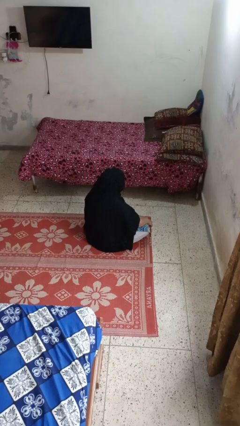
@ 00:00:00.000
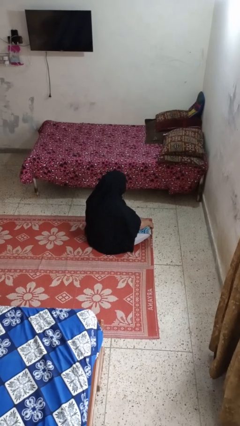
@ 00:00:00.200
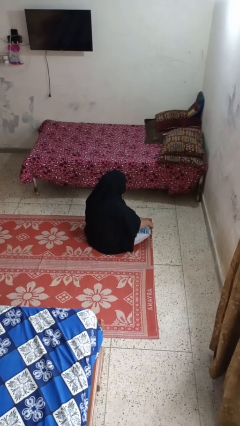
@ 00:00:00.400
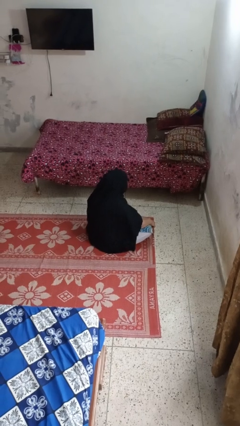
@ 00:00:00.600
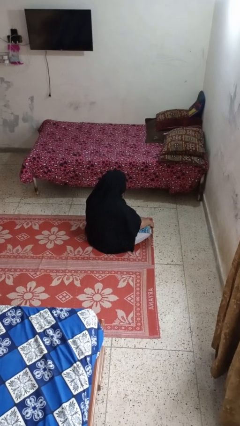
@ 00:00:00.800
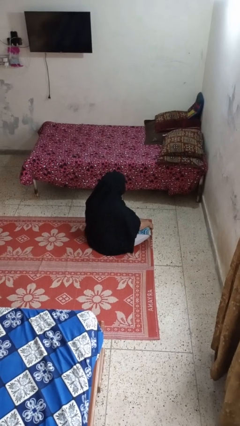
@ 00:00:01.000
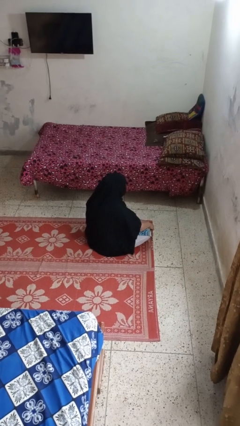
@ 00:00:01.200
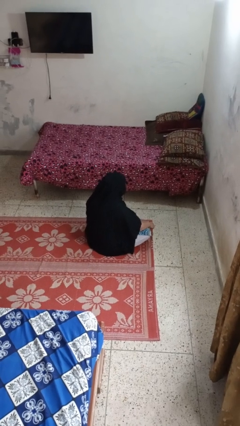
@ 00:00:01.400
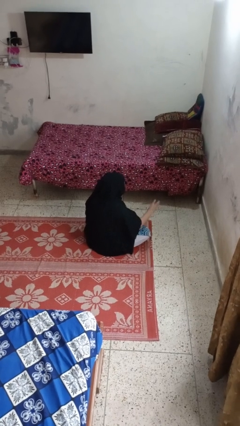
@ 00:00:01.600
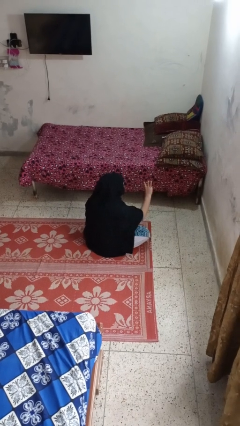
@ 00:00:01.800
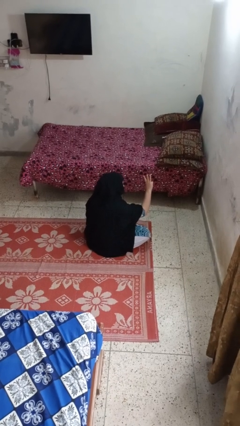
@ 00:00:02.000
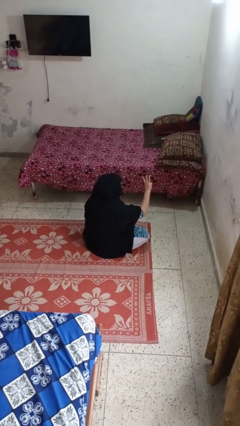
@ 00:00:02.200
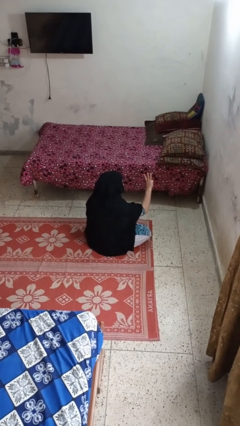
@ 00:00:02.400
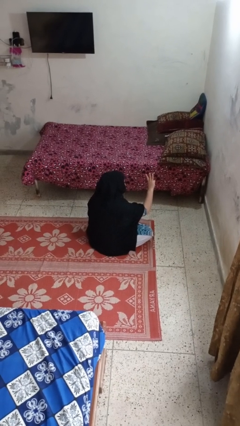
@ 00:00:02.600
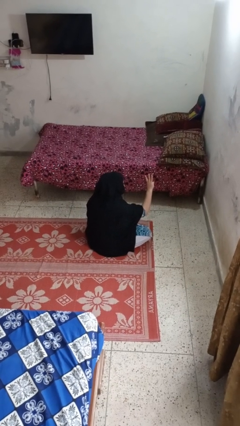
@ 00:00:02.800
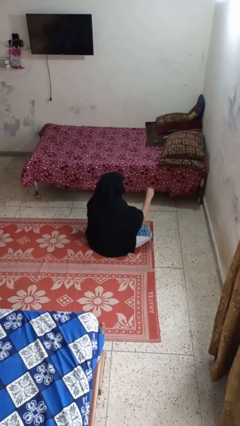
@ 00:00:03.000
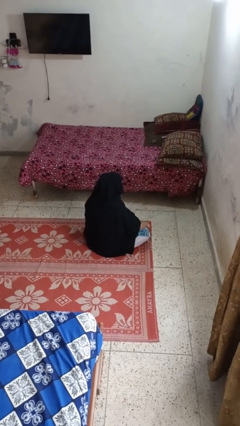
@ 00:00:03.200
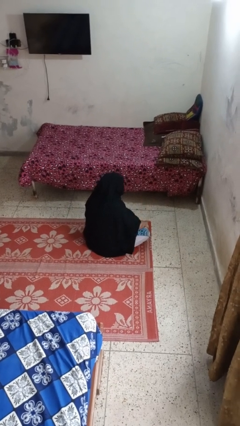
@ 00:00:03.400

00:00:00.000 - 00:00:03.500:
person gestures number three

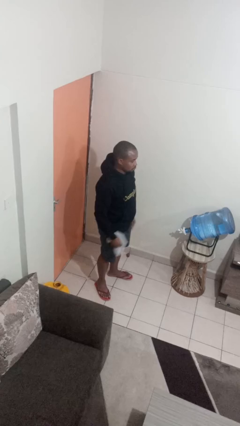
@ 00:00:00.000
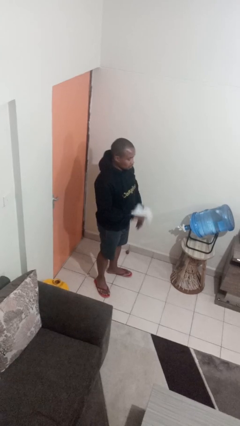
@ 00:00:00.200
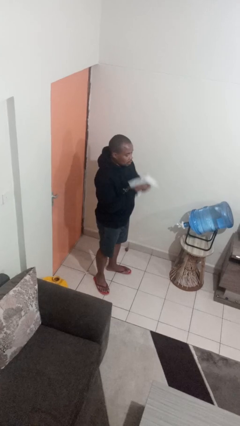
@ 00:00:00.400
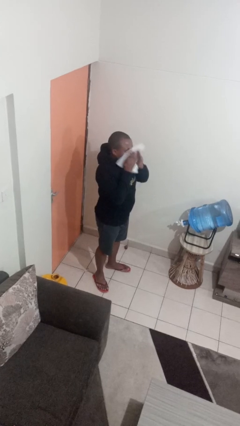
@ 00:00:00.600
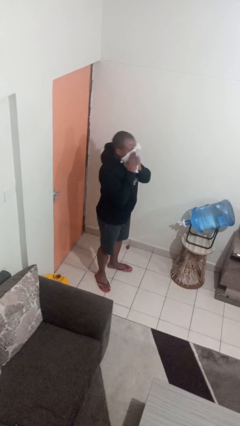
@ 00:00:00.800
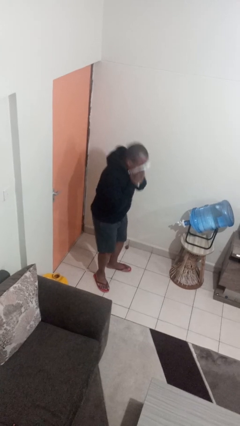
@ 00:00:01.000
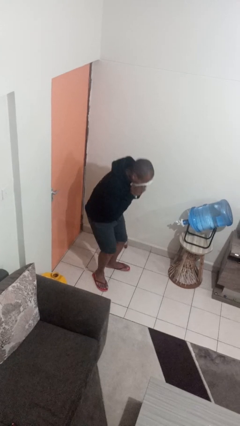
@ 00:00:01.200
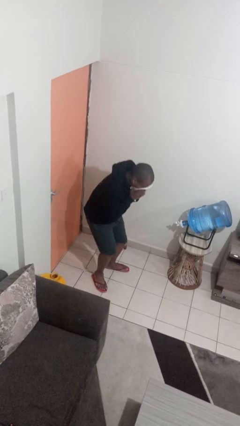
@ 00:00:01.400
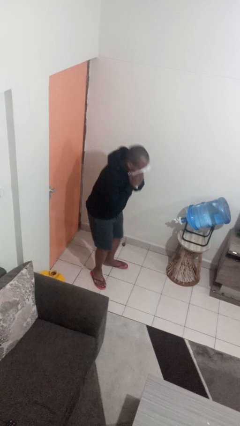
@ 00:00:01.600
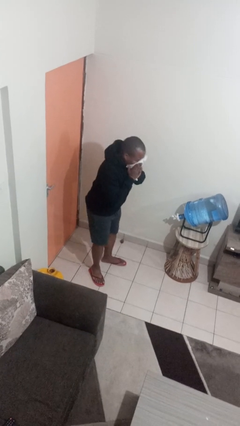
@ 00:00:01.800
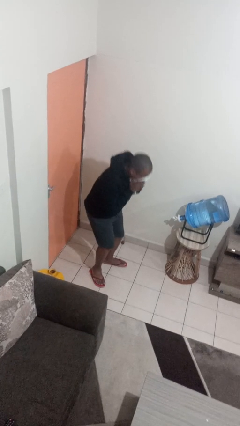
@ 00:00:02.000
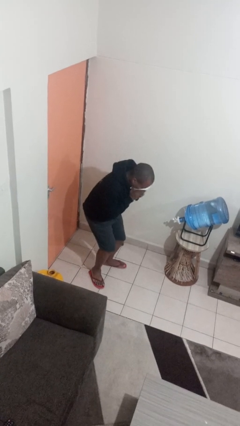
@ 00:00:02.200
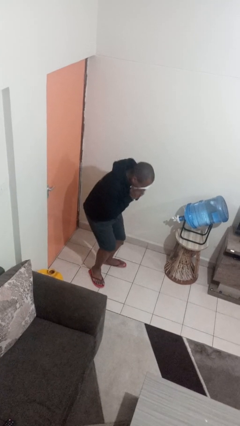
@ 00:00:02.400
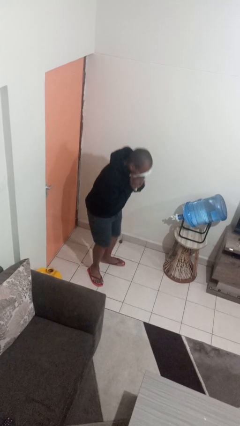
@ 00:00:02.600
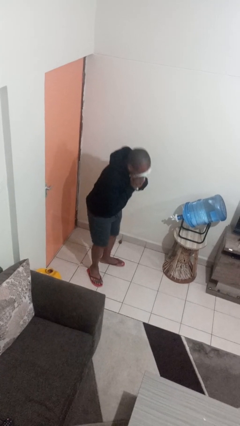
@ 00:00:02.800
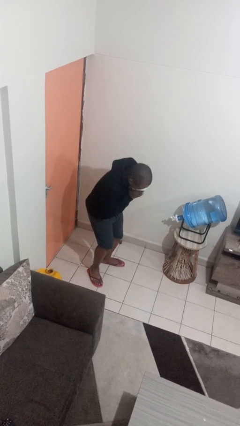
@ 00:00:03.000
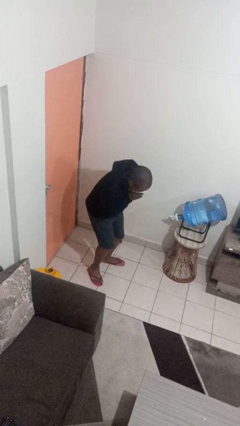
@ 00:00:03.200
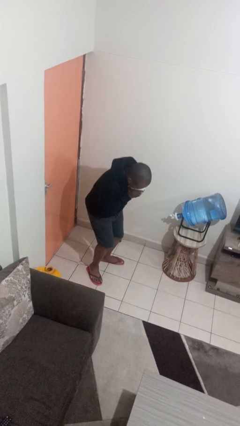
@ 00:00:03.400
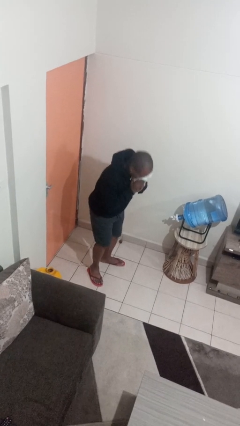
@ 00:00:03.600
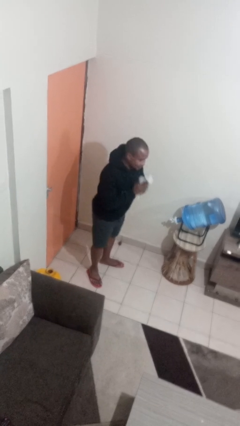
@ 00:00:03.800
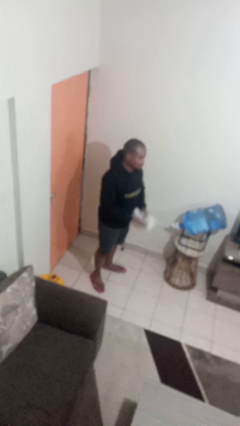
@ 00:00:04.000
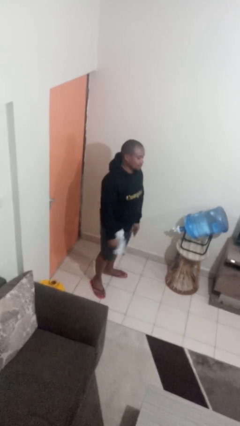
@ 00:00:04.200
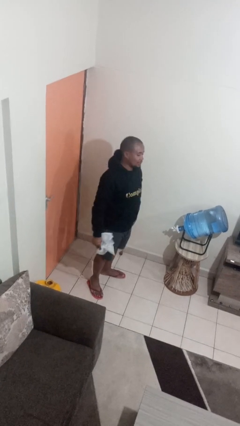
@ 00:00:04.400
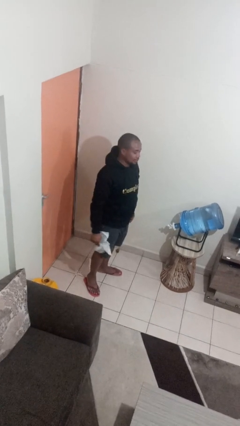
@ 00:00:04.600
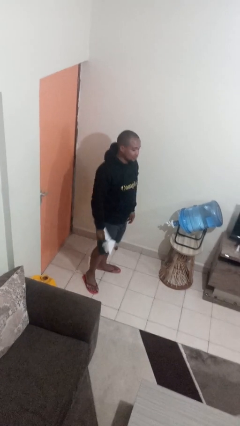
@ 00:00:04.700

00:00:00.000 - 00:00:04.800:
person blows nose

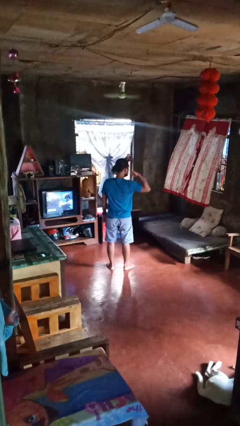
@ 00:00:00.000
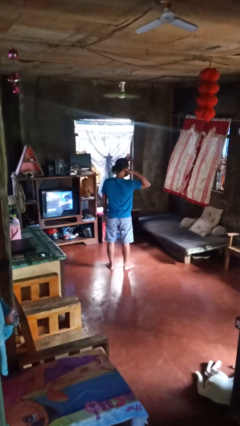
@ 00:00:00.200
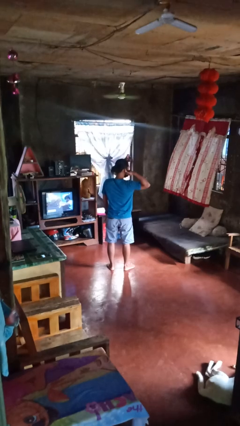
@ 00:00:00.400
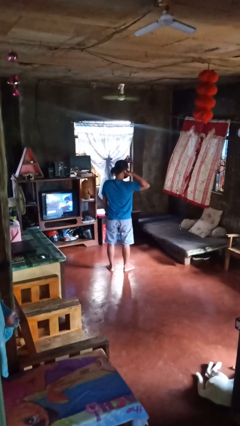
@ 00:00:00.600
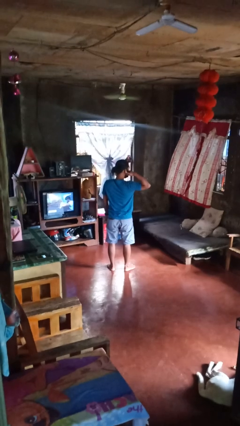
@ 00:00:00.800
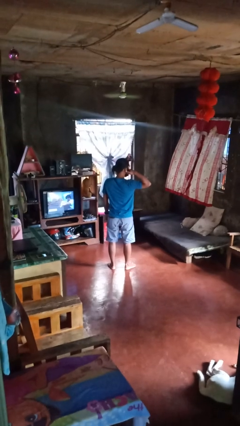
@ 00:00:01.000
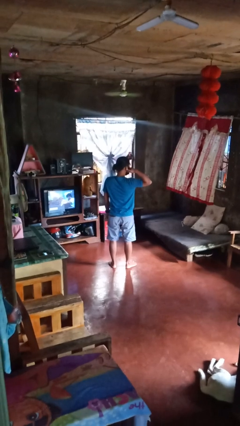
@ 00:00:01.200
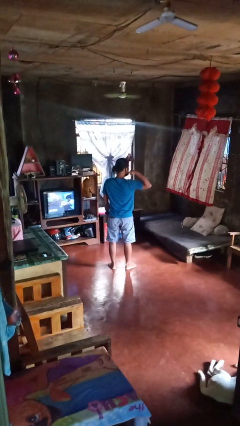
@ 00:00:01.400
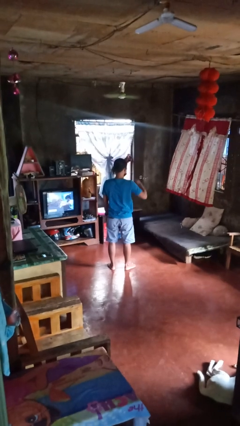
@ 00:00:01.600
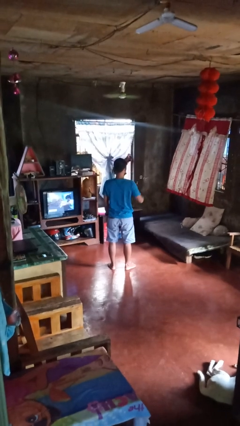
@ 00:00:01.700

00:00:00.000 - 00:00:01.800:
person gestures call me

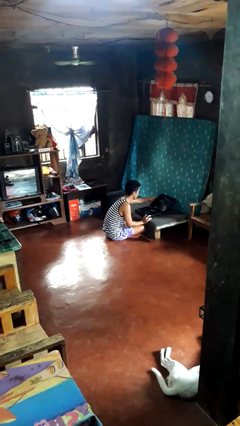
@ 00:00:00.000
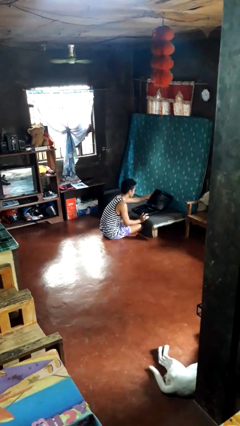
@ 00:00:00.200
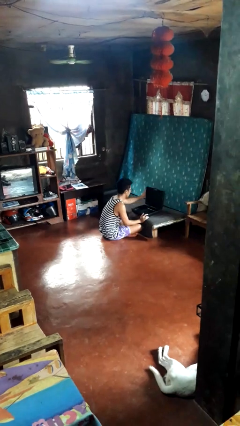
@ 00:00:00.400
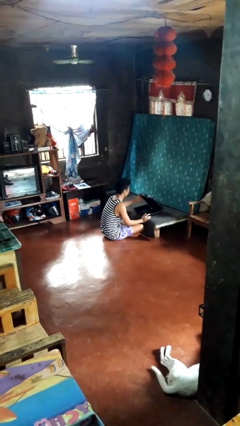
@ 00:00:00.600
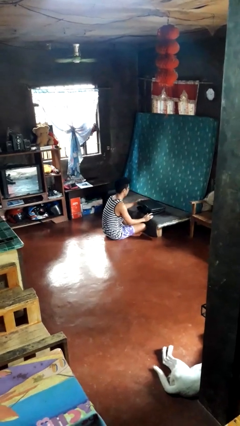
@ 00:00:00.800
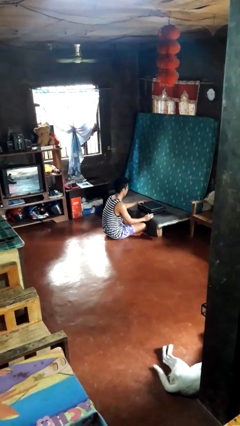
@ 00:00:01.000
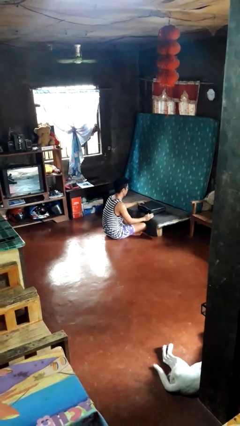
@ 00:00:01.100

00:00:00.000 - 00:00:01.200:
person closes suitcase

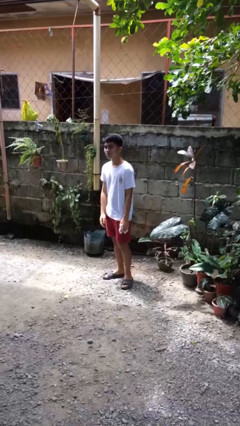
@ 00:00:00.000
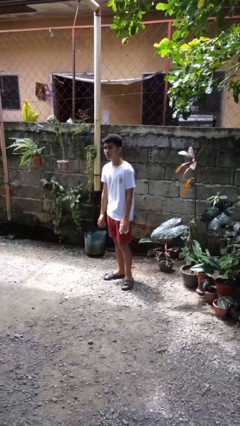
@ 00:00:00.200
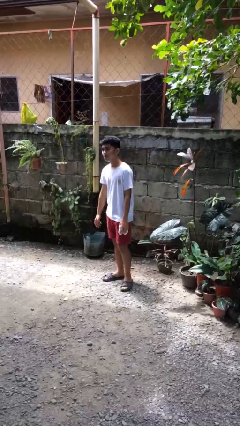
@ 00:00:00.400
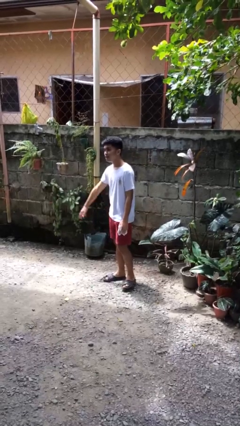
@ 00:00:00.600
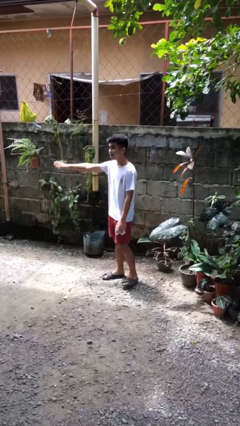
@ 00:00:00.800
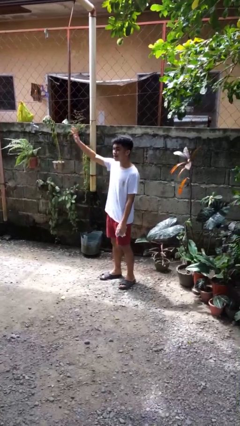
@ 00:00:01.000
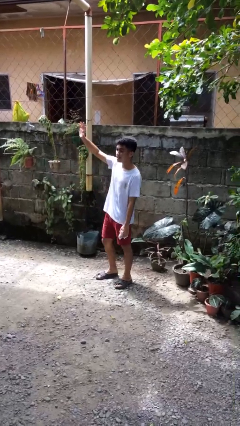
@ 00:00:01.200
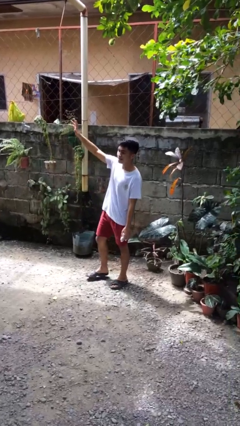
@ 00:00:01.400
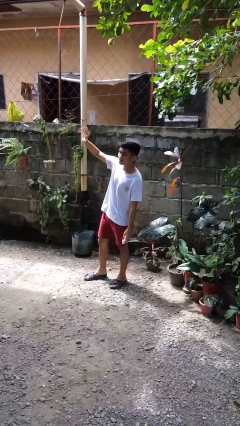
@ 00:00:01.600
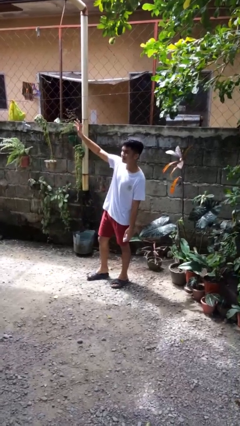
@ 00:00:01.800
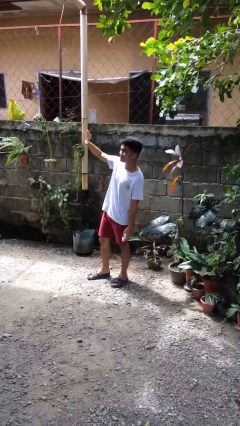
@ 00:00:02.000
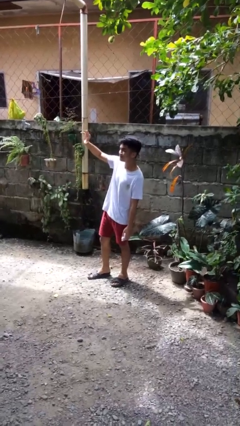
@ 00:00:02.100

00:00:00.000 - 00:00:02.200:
person waves at person

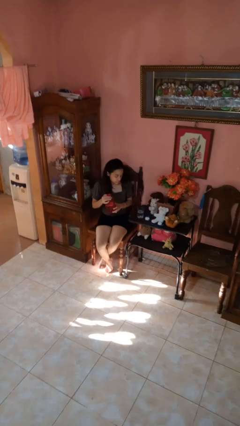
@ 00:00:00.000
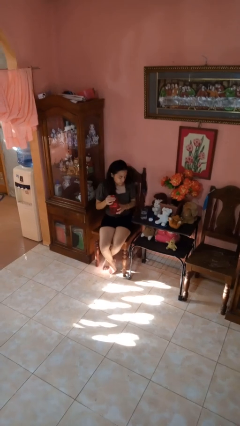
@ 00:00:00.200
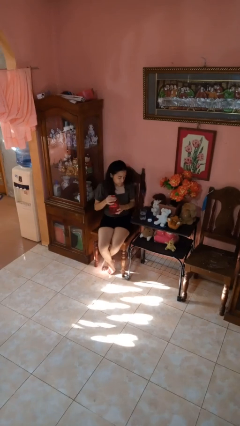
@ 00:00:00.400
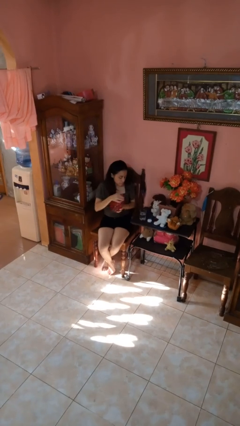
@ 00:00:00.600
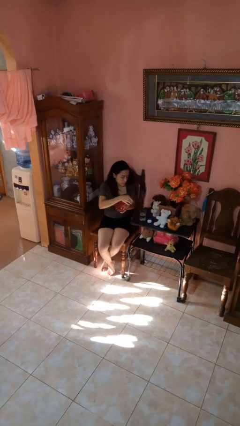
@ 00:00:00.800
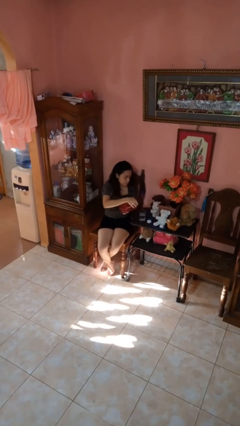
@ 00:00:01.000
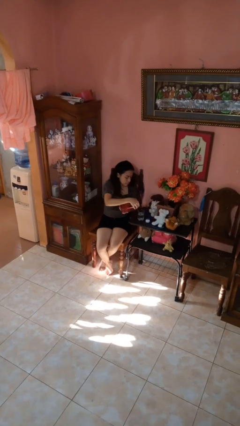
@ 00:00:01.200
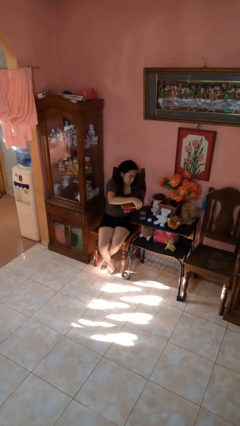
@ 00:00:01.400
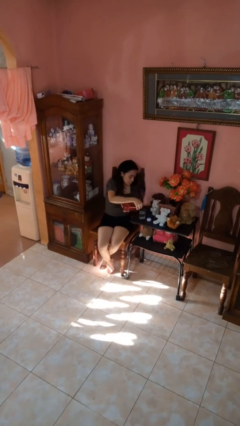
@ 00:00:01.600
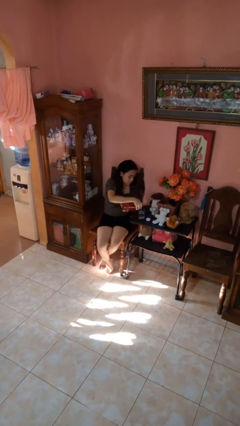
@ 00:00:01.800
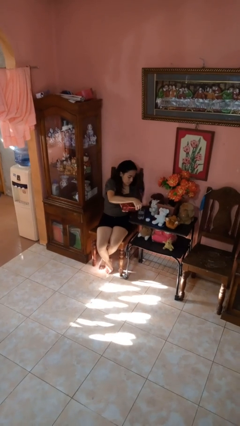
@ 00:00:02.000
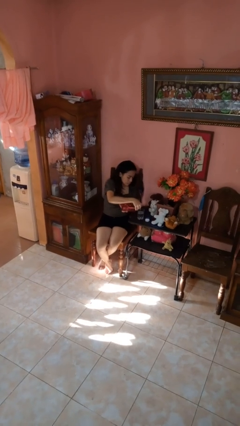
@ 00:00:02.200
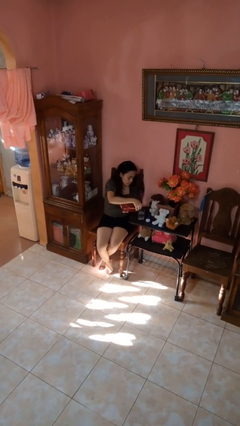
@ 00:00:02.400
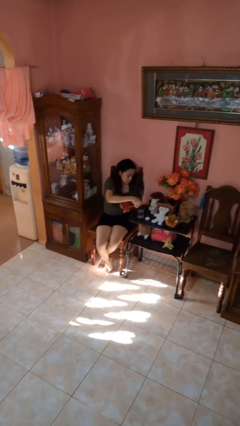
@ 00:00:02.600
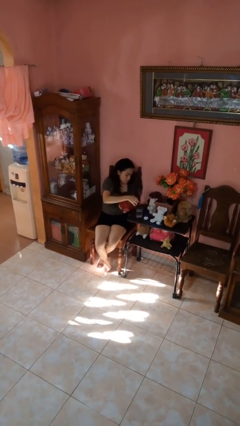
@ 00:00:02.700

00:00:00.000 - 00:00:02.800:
person pours liquid into cup

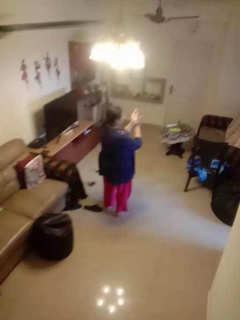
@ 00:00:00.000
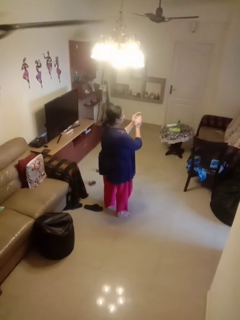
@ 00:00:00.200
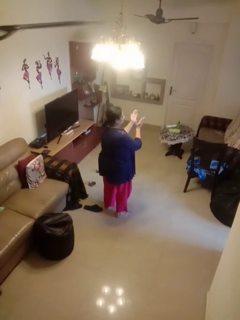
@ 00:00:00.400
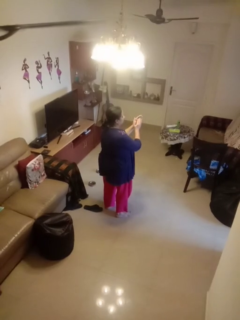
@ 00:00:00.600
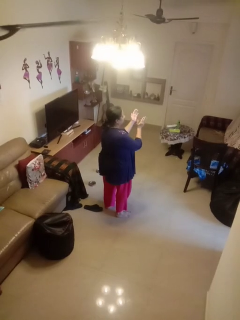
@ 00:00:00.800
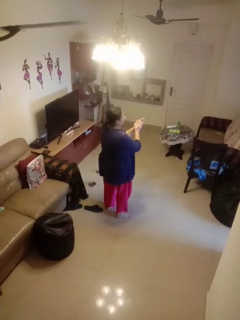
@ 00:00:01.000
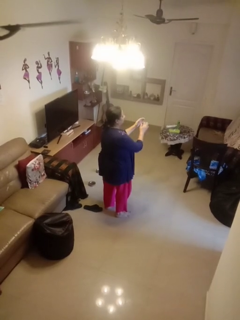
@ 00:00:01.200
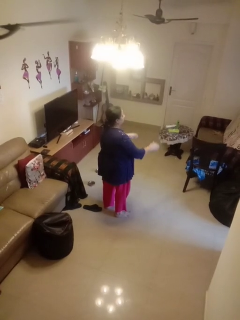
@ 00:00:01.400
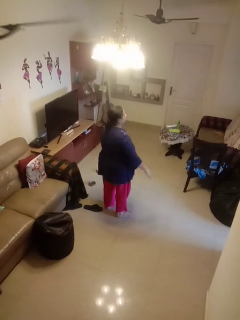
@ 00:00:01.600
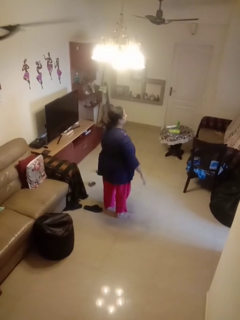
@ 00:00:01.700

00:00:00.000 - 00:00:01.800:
person claps hands
